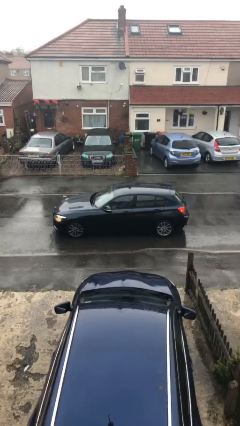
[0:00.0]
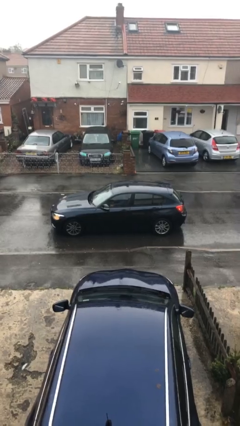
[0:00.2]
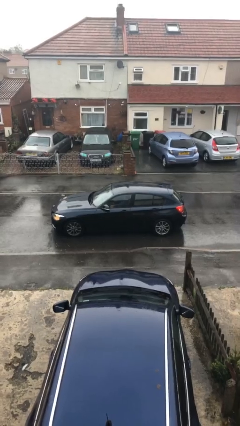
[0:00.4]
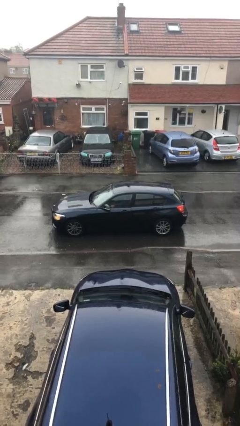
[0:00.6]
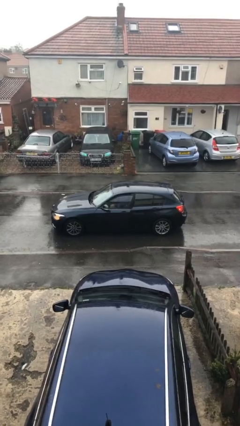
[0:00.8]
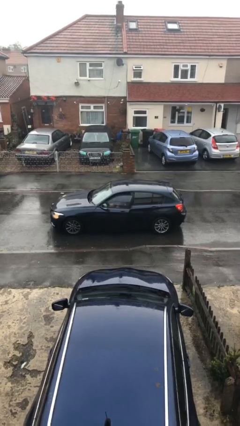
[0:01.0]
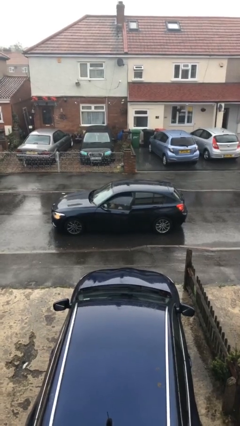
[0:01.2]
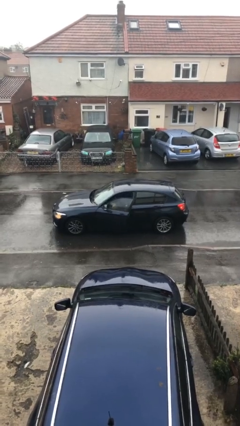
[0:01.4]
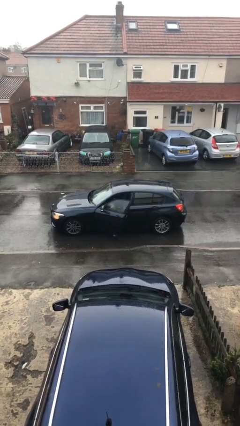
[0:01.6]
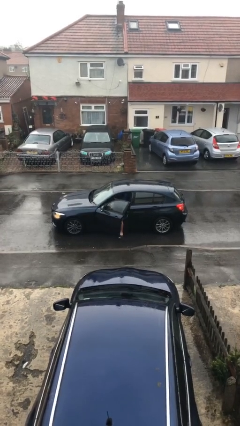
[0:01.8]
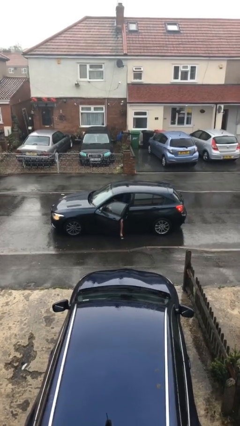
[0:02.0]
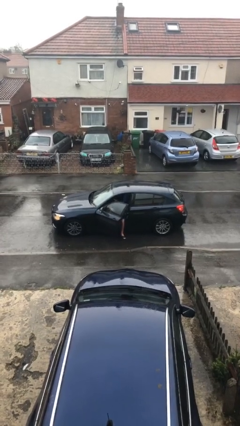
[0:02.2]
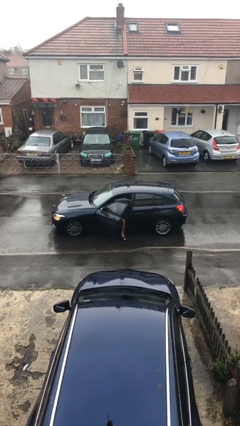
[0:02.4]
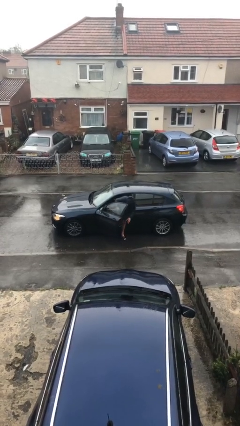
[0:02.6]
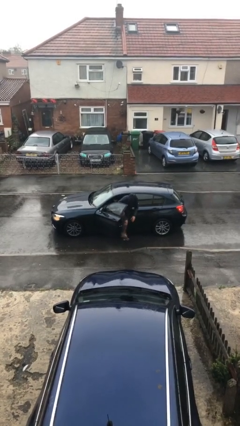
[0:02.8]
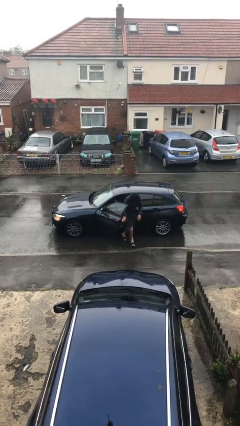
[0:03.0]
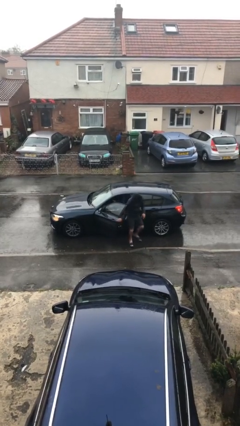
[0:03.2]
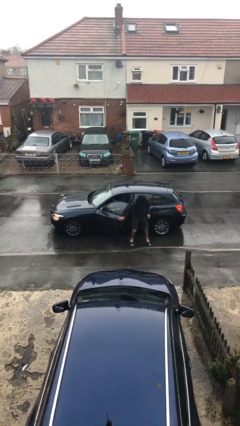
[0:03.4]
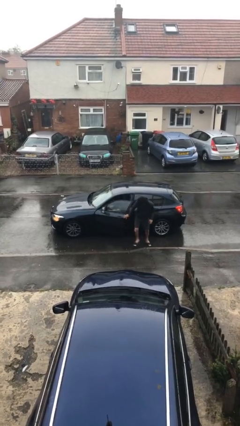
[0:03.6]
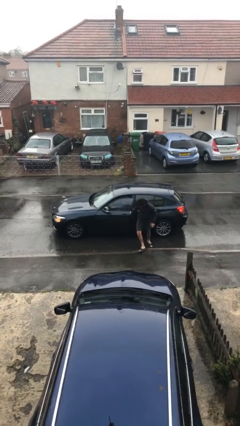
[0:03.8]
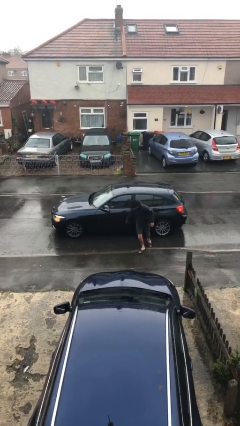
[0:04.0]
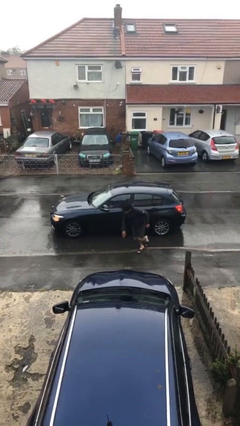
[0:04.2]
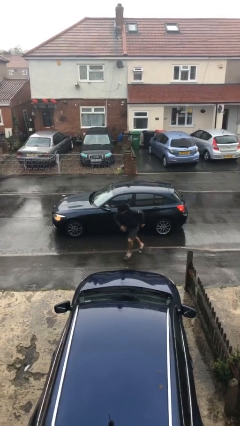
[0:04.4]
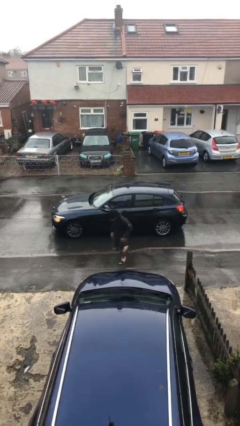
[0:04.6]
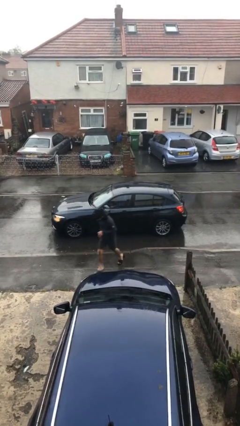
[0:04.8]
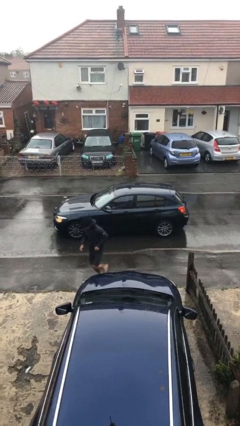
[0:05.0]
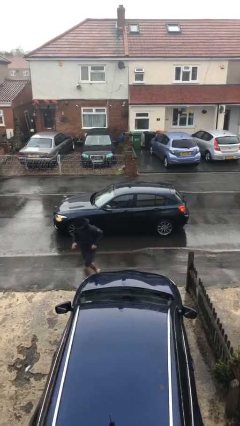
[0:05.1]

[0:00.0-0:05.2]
car drops off person

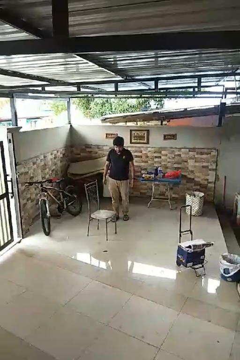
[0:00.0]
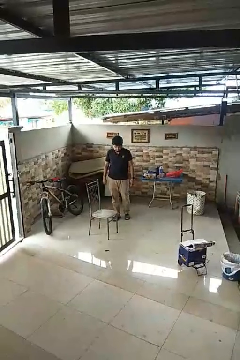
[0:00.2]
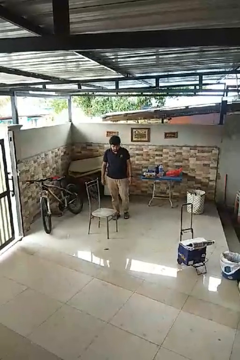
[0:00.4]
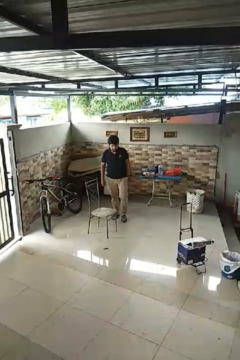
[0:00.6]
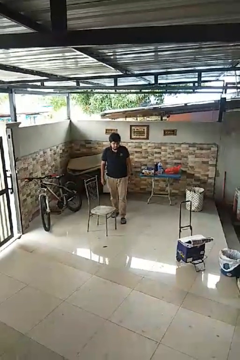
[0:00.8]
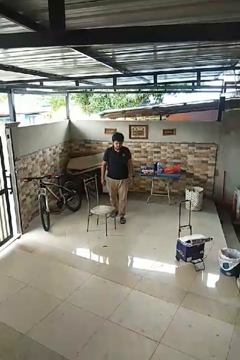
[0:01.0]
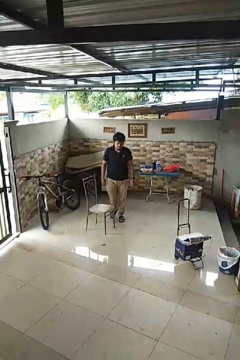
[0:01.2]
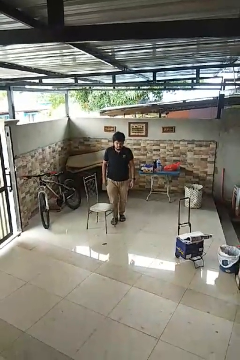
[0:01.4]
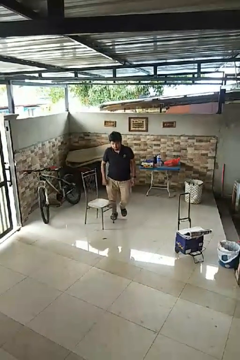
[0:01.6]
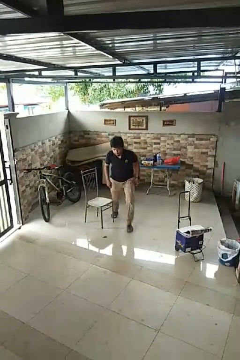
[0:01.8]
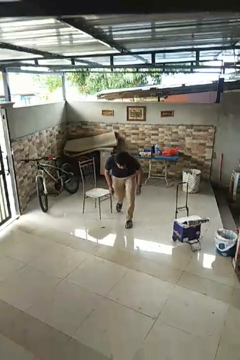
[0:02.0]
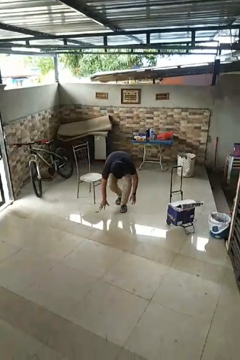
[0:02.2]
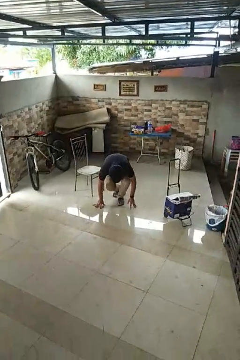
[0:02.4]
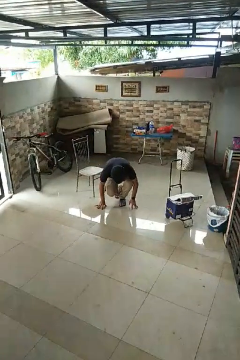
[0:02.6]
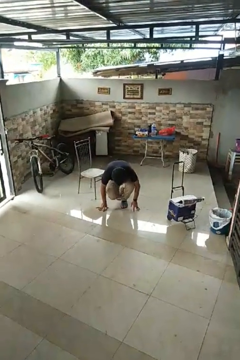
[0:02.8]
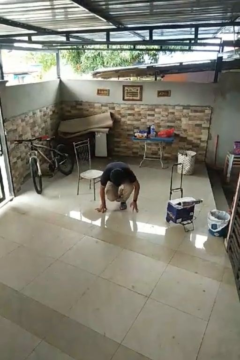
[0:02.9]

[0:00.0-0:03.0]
person trips on object on floor

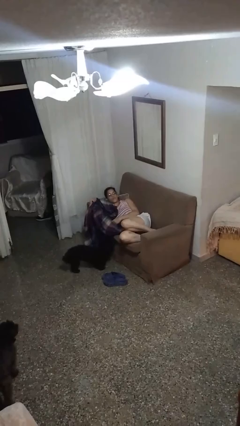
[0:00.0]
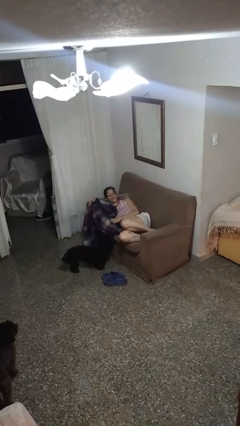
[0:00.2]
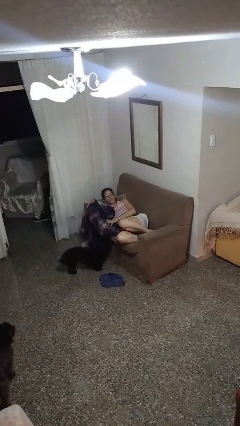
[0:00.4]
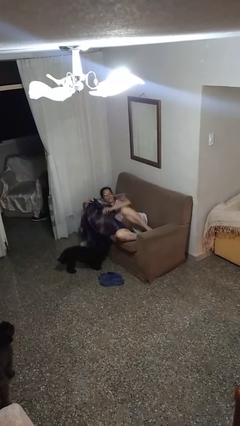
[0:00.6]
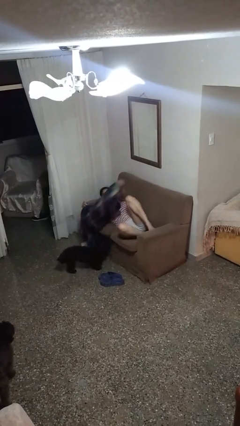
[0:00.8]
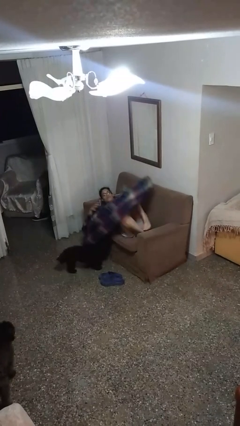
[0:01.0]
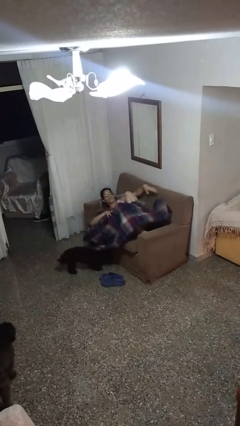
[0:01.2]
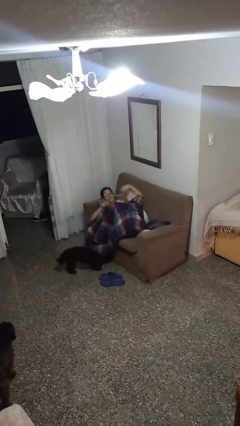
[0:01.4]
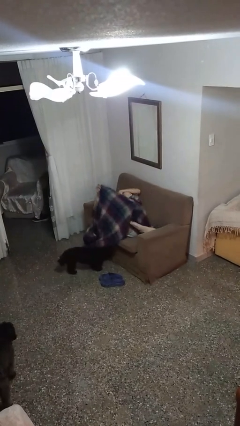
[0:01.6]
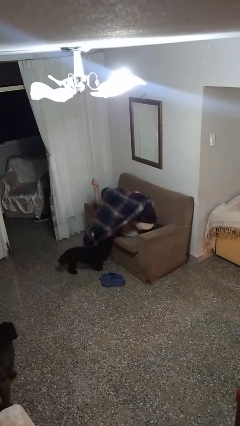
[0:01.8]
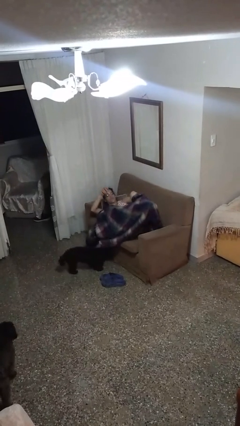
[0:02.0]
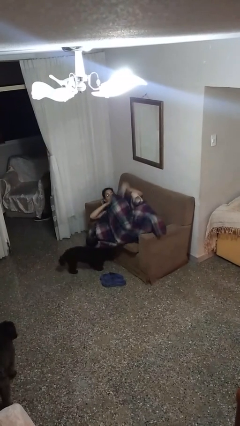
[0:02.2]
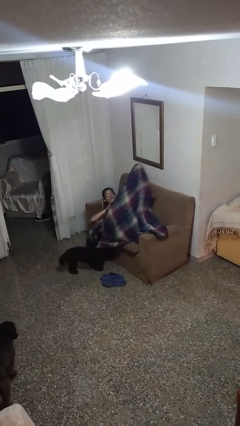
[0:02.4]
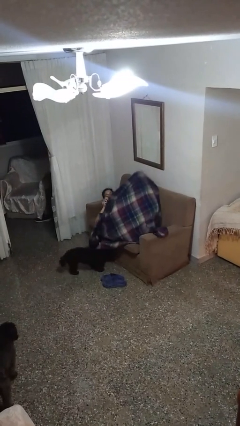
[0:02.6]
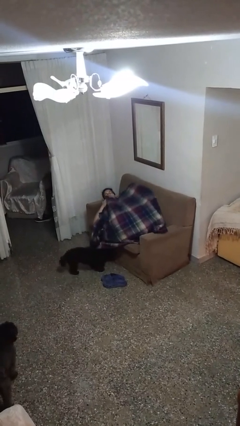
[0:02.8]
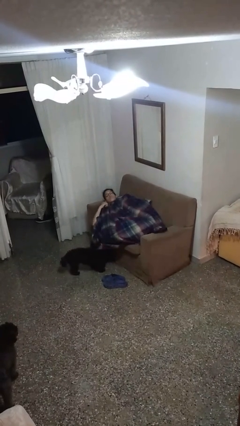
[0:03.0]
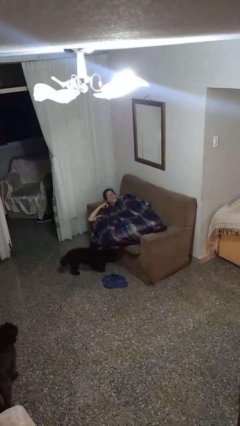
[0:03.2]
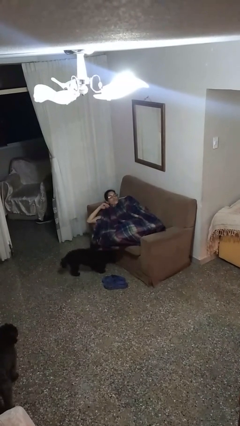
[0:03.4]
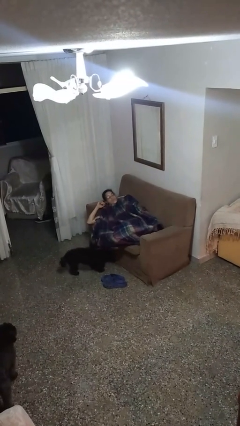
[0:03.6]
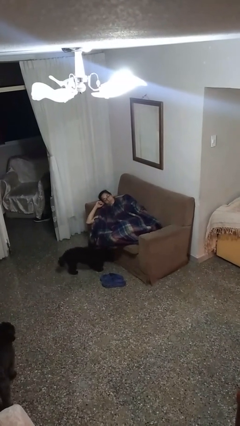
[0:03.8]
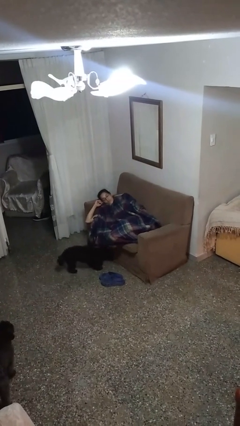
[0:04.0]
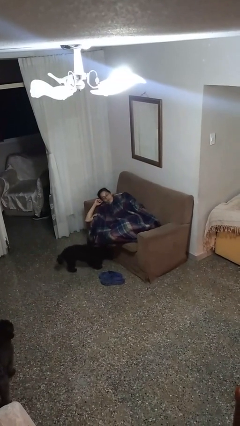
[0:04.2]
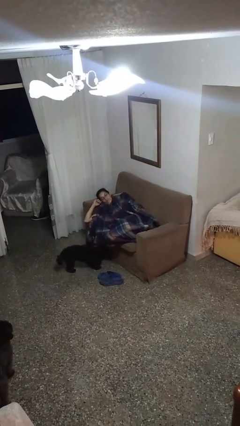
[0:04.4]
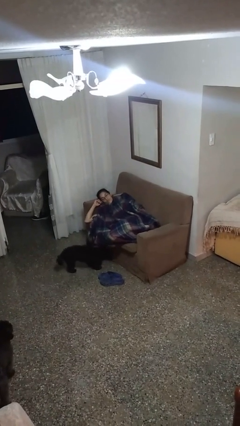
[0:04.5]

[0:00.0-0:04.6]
person covers with blanket

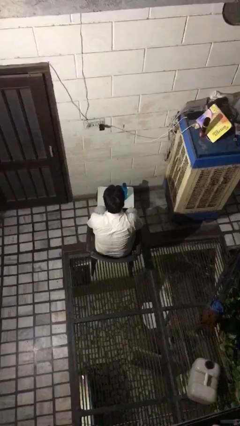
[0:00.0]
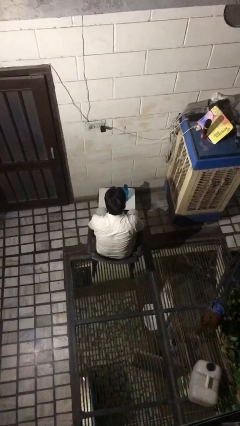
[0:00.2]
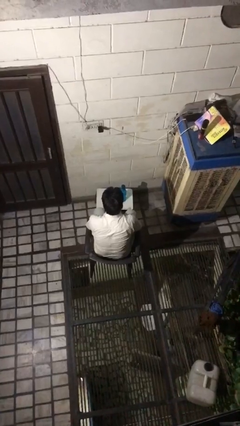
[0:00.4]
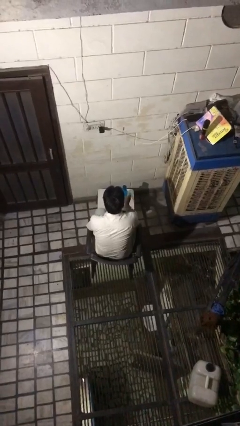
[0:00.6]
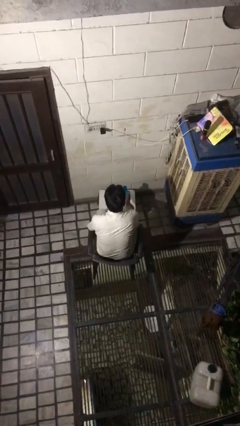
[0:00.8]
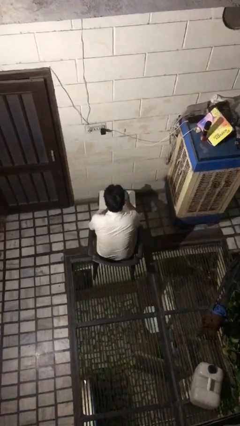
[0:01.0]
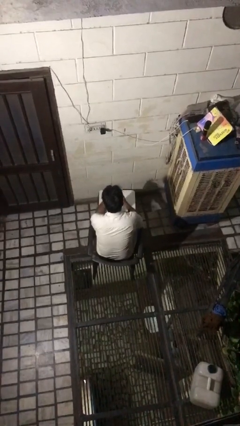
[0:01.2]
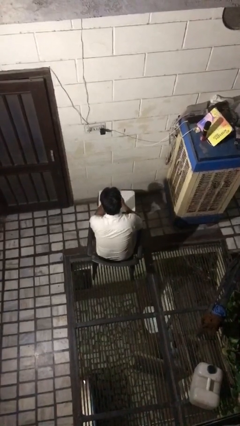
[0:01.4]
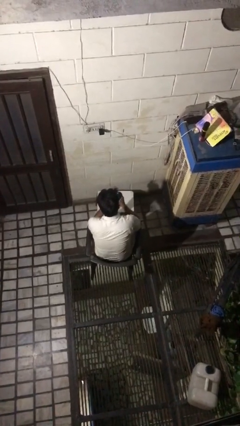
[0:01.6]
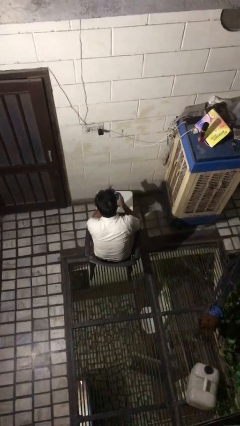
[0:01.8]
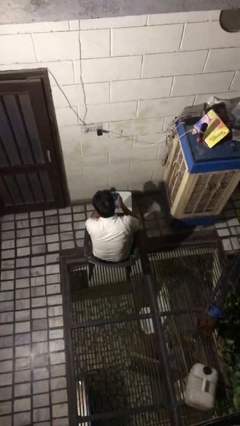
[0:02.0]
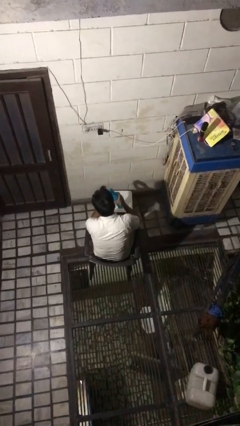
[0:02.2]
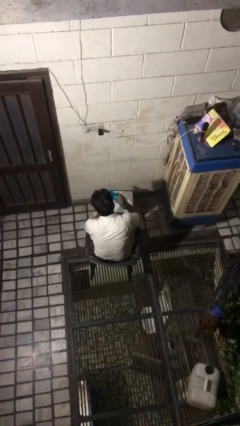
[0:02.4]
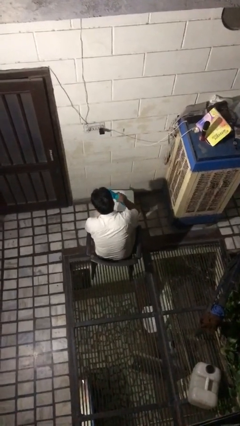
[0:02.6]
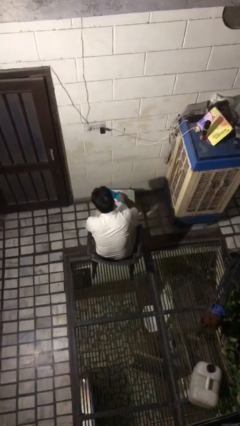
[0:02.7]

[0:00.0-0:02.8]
person unscrews lid from bottle

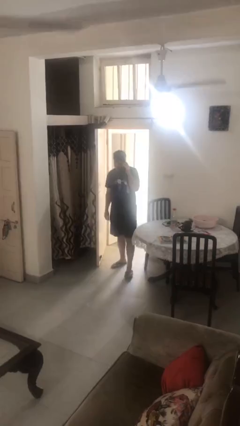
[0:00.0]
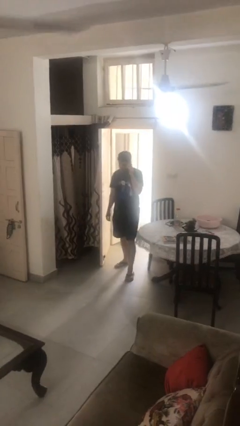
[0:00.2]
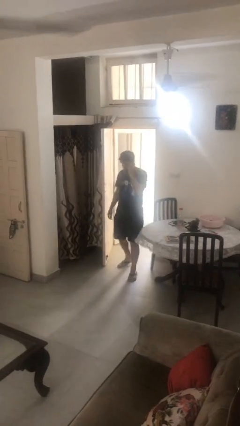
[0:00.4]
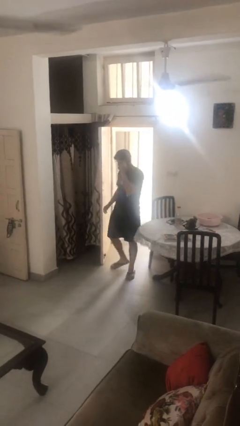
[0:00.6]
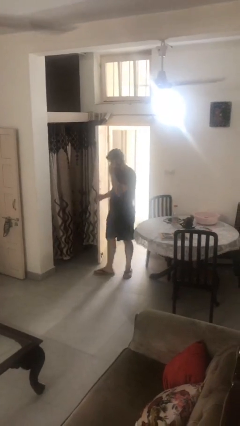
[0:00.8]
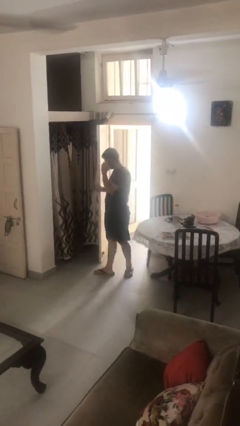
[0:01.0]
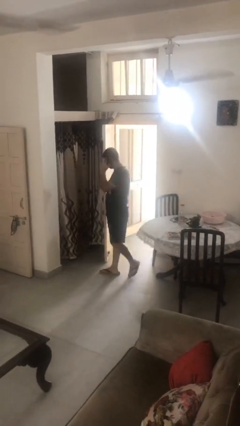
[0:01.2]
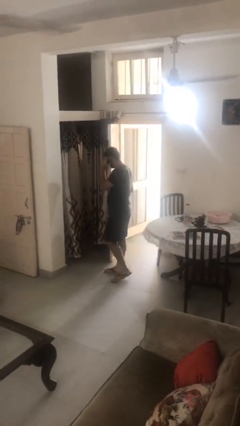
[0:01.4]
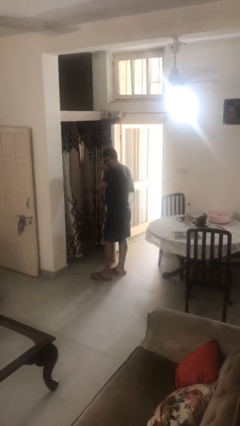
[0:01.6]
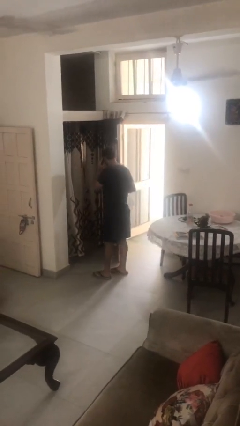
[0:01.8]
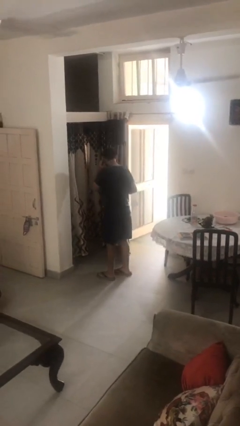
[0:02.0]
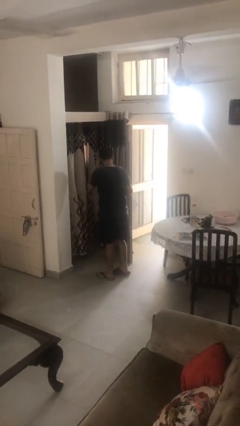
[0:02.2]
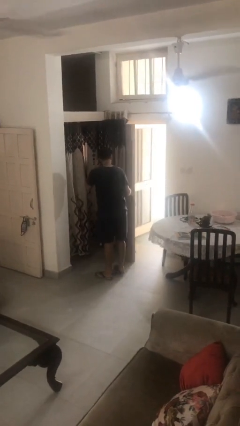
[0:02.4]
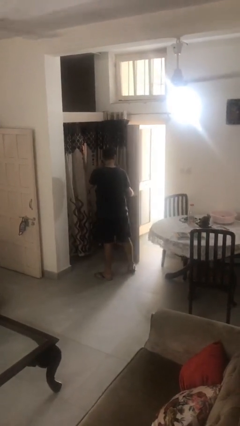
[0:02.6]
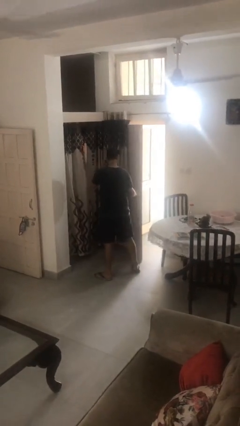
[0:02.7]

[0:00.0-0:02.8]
person enters scene through structure
